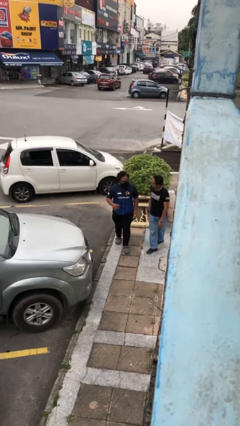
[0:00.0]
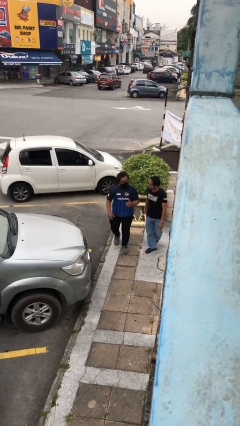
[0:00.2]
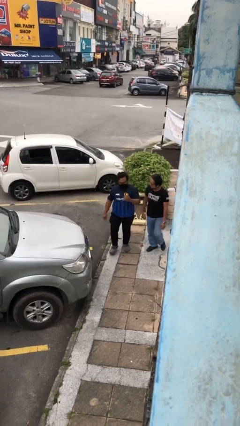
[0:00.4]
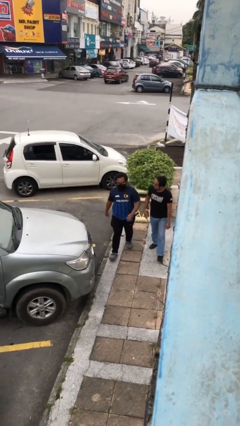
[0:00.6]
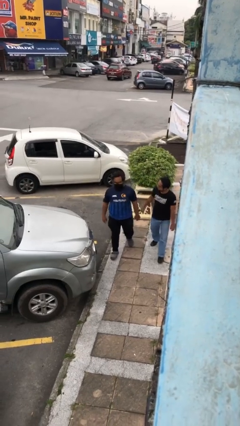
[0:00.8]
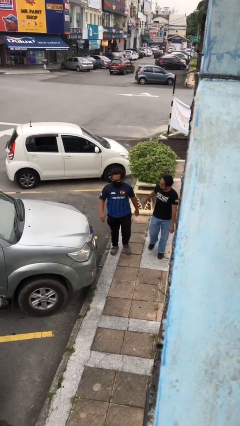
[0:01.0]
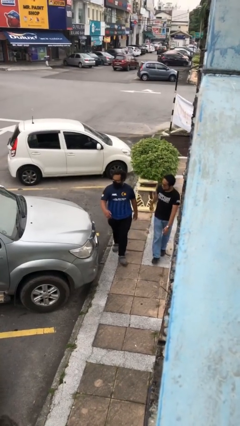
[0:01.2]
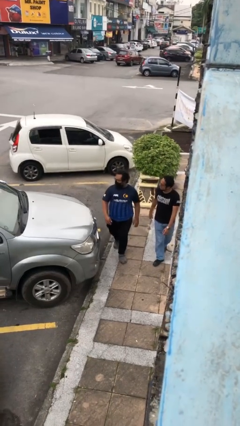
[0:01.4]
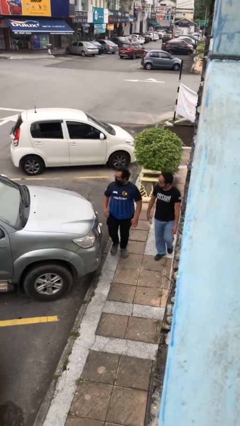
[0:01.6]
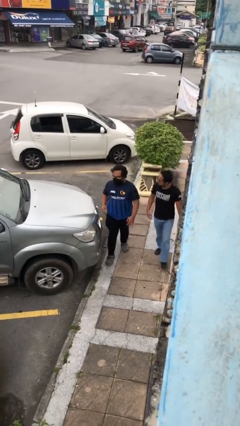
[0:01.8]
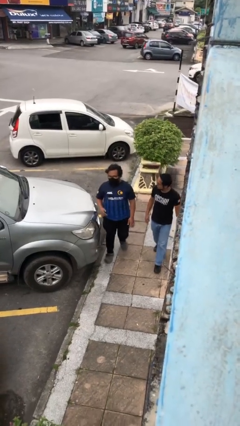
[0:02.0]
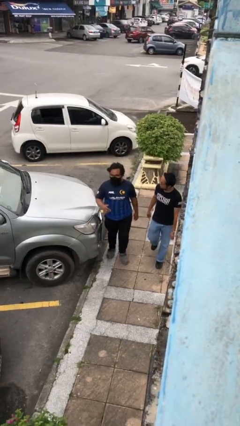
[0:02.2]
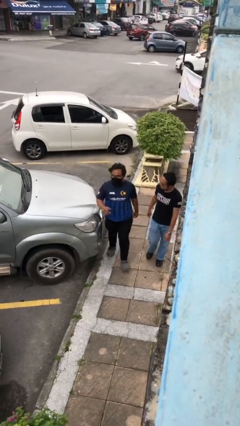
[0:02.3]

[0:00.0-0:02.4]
person talks to person

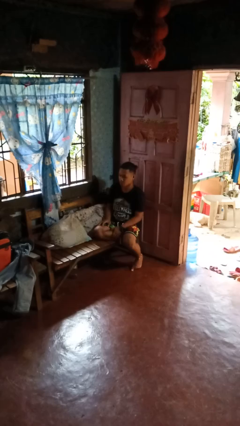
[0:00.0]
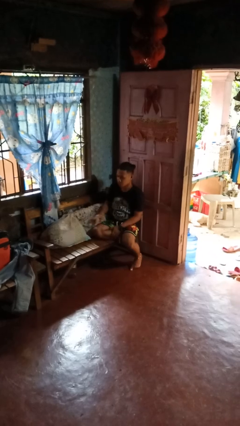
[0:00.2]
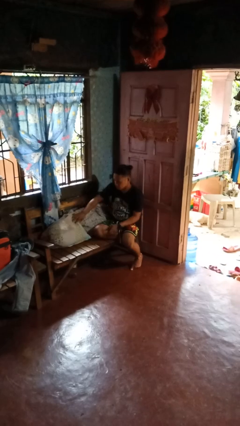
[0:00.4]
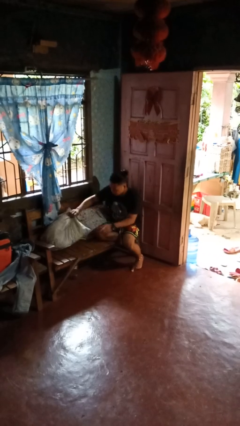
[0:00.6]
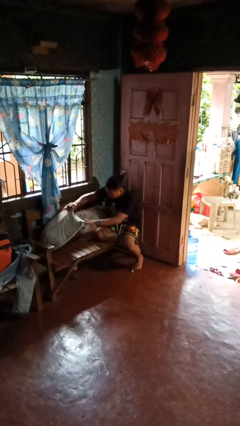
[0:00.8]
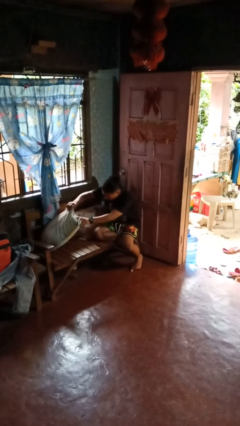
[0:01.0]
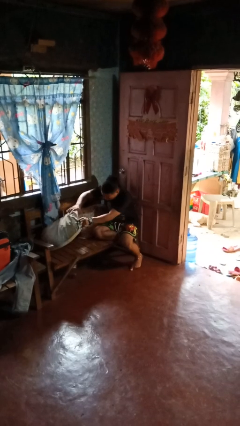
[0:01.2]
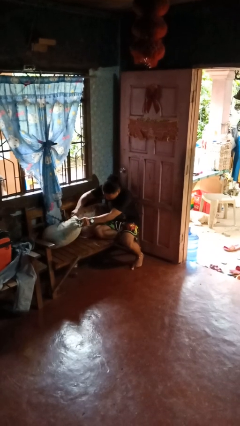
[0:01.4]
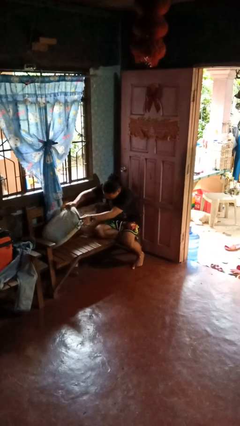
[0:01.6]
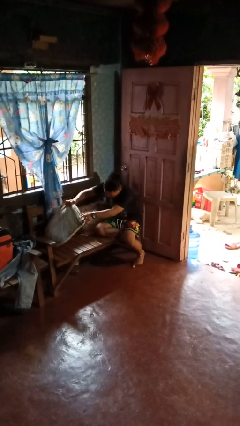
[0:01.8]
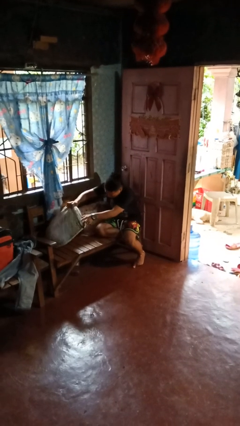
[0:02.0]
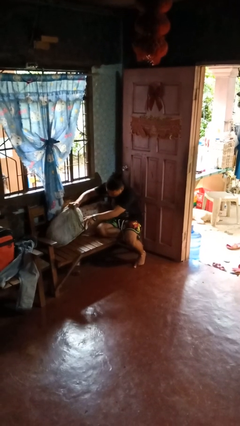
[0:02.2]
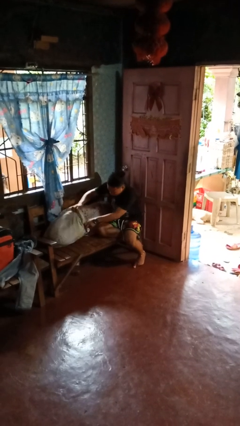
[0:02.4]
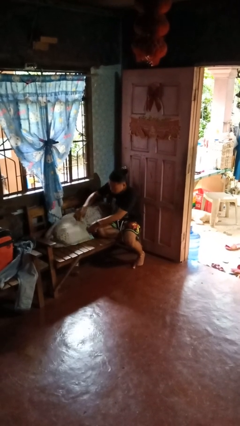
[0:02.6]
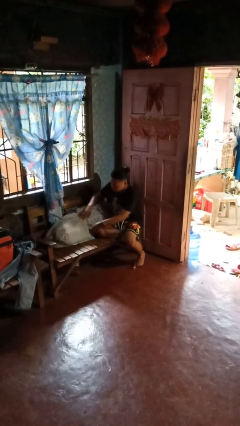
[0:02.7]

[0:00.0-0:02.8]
person searches in couch

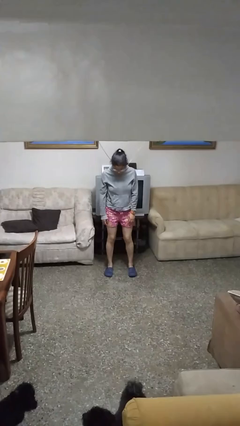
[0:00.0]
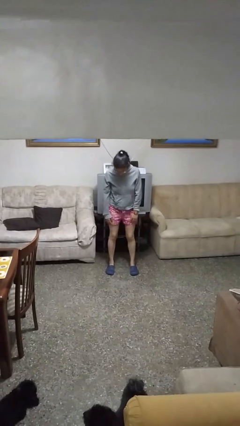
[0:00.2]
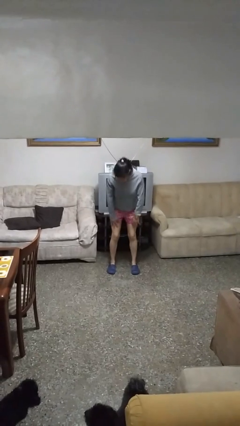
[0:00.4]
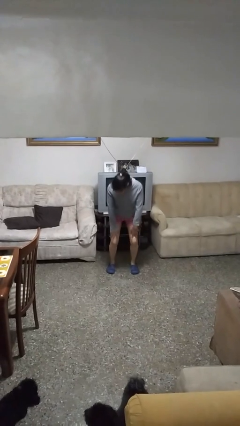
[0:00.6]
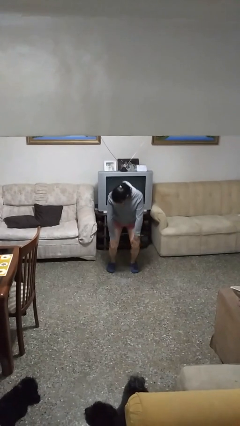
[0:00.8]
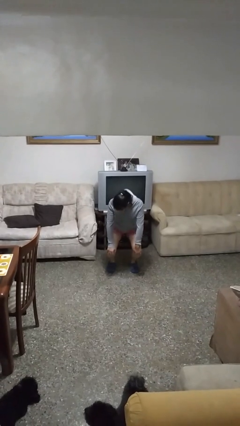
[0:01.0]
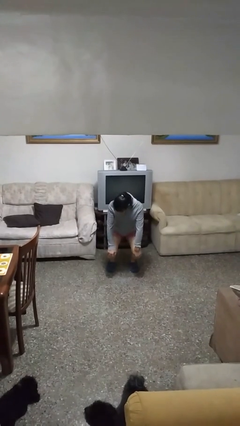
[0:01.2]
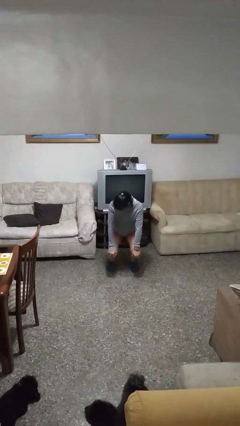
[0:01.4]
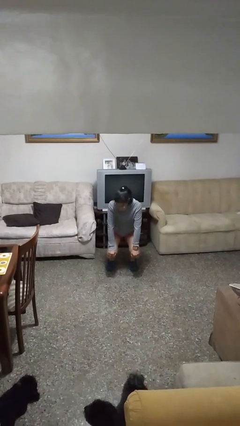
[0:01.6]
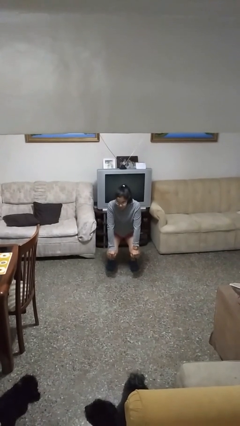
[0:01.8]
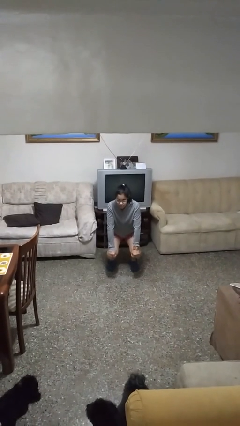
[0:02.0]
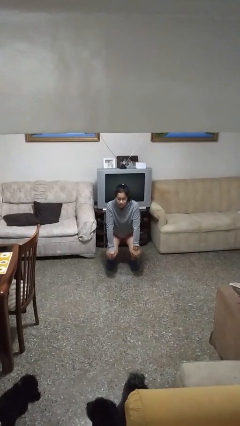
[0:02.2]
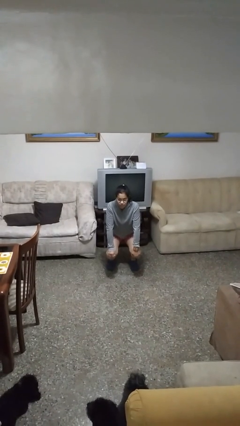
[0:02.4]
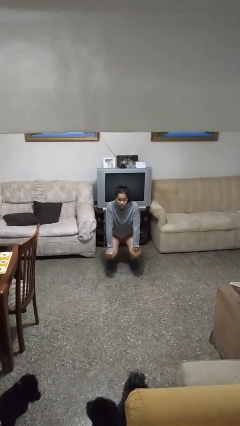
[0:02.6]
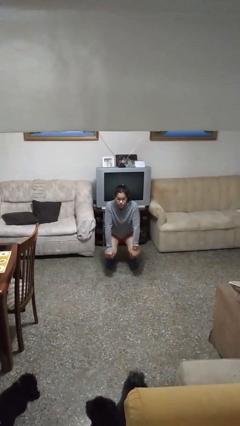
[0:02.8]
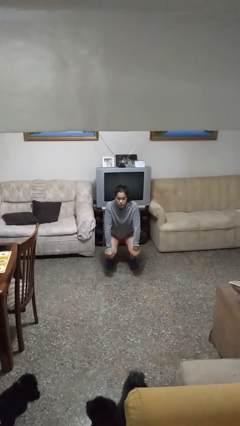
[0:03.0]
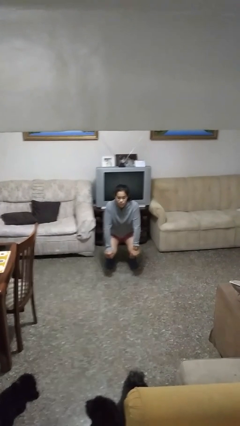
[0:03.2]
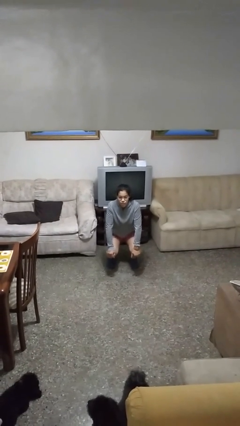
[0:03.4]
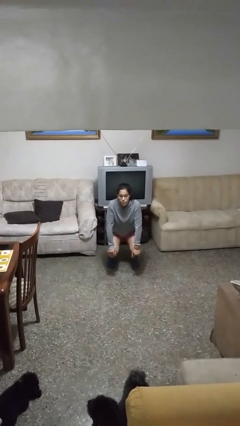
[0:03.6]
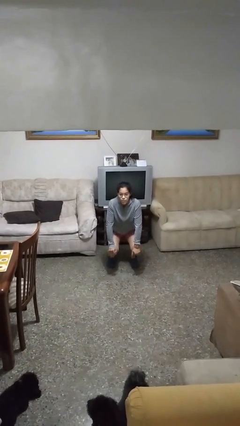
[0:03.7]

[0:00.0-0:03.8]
person squats

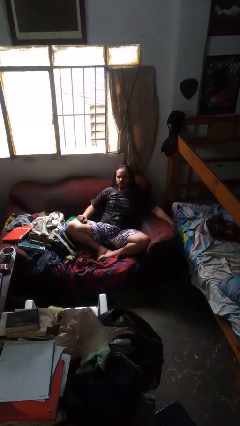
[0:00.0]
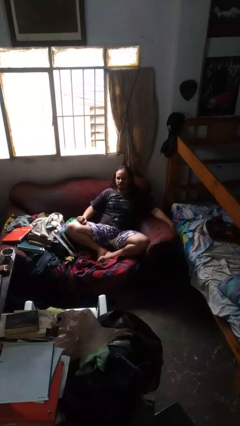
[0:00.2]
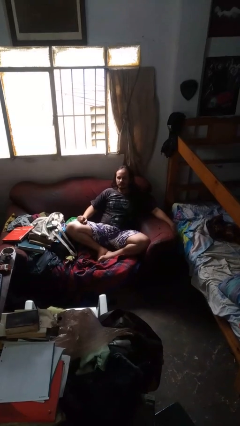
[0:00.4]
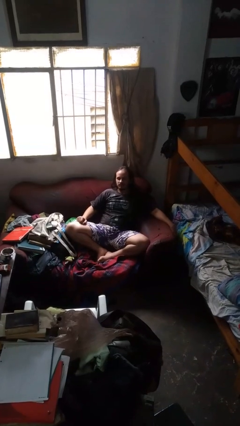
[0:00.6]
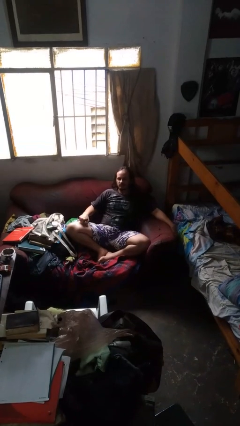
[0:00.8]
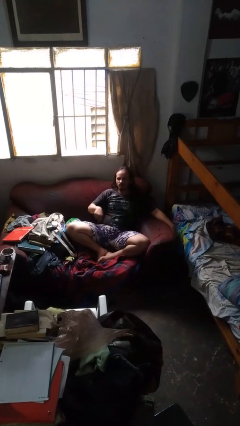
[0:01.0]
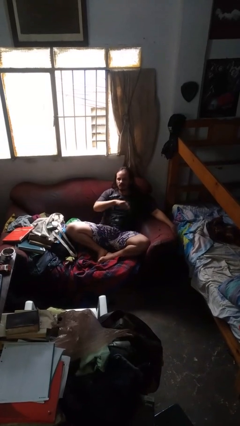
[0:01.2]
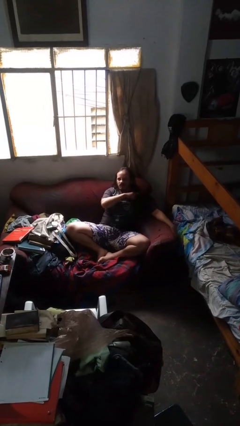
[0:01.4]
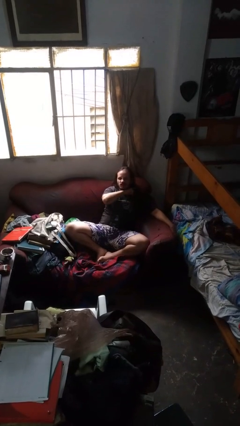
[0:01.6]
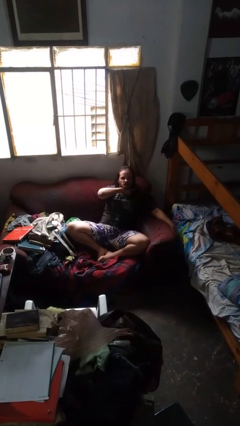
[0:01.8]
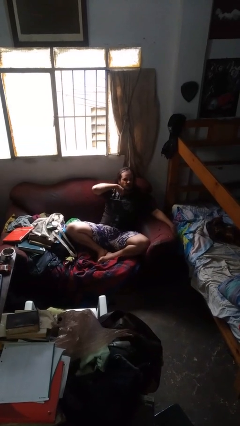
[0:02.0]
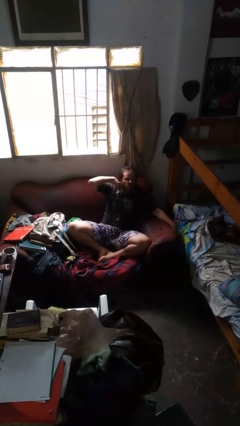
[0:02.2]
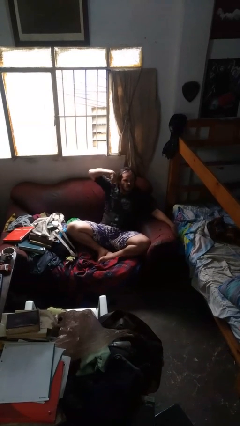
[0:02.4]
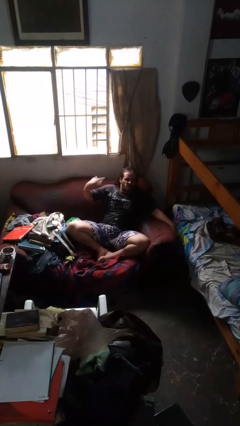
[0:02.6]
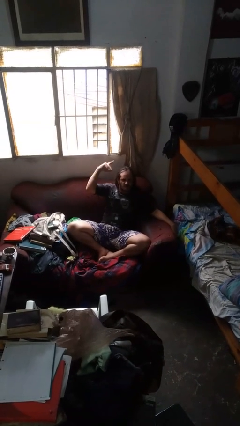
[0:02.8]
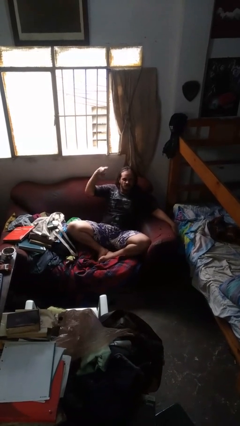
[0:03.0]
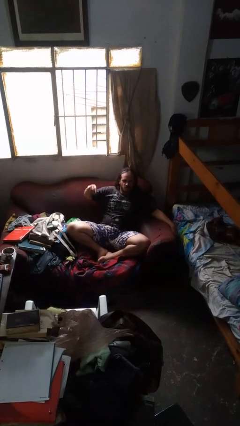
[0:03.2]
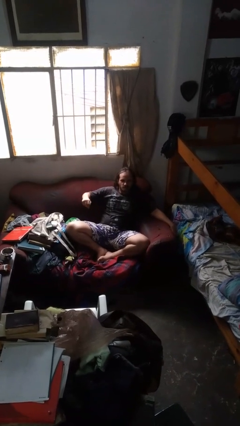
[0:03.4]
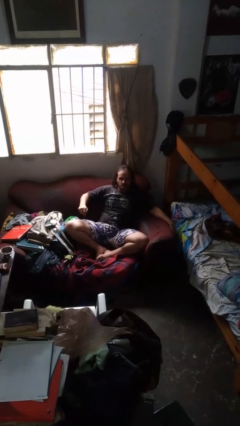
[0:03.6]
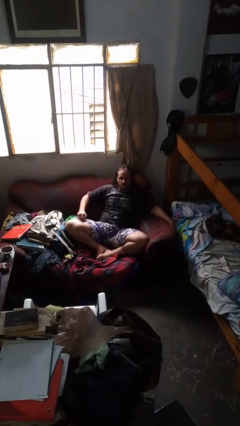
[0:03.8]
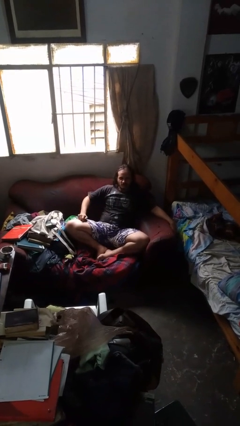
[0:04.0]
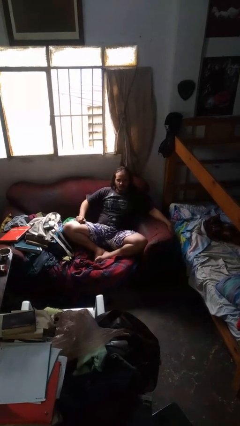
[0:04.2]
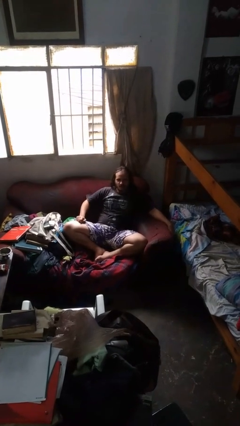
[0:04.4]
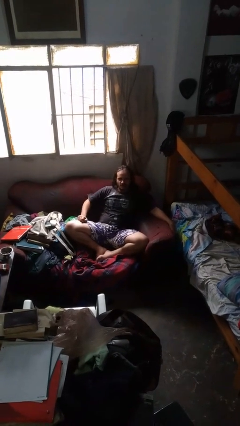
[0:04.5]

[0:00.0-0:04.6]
person gestures cut

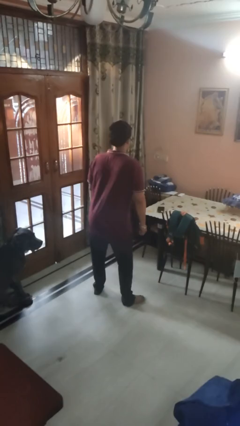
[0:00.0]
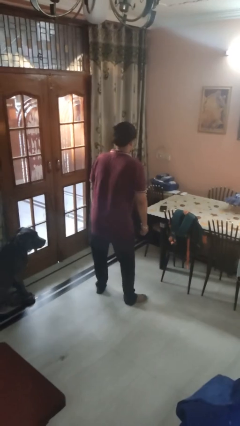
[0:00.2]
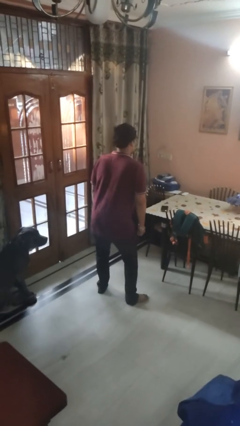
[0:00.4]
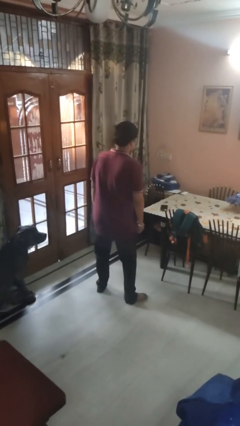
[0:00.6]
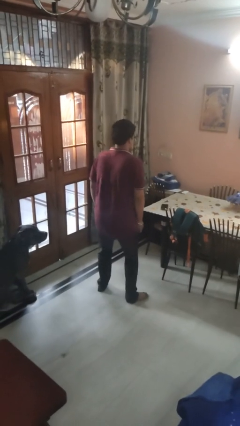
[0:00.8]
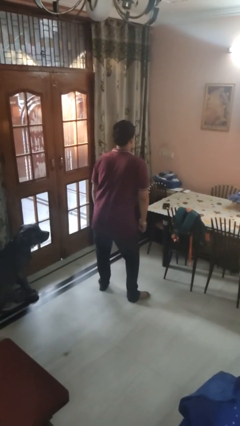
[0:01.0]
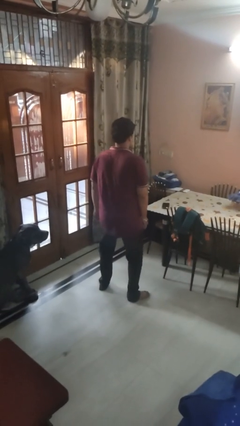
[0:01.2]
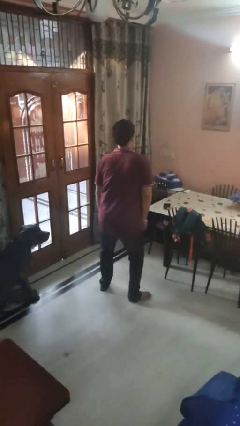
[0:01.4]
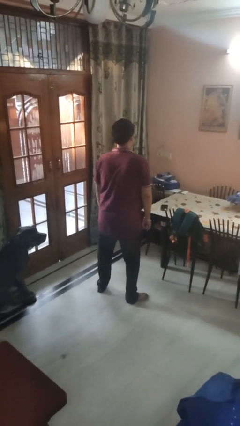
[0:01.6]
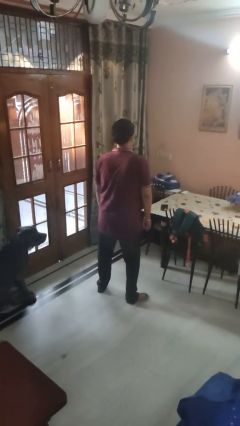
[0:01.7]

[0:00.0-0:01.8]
person wiggles hips

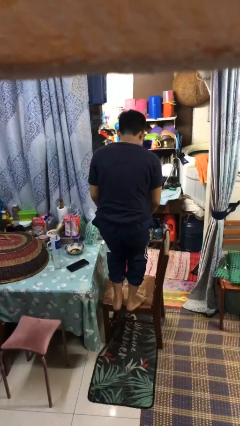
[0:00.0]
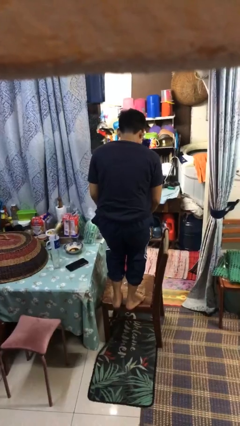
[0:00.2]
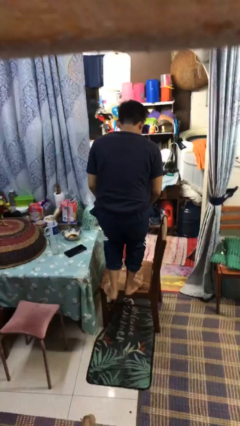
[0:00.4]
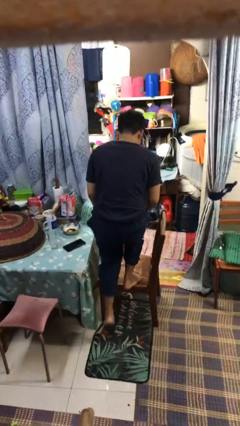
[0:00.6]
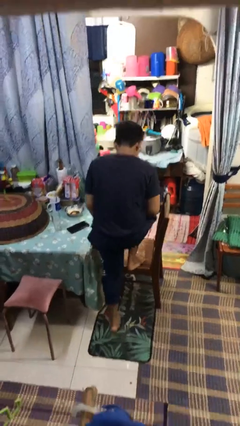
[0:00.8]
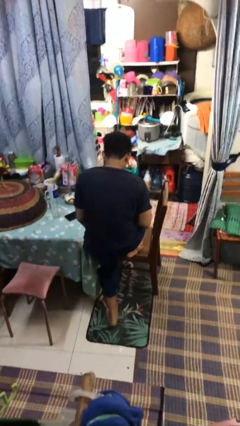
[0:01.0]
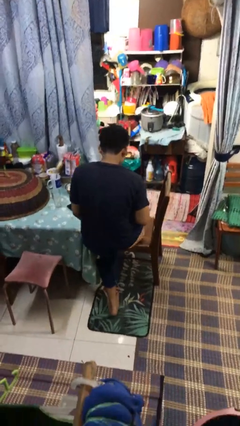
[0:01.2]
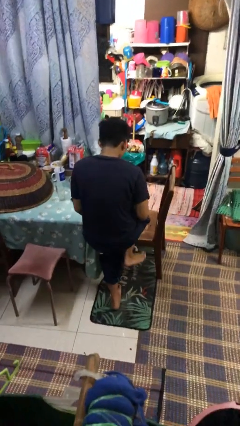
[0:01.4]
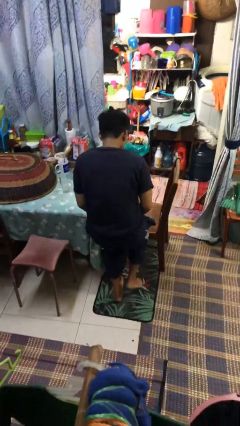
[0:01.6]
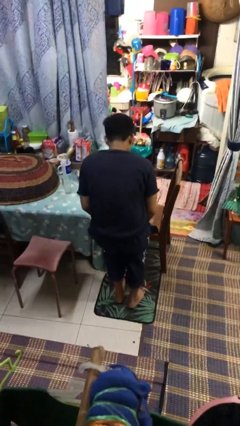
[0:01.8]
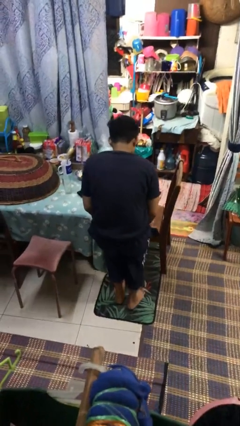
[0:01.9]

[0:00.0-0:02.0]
person climbs off chair
